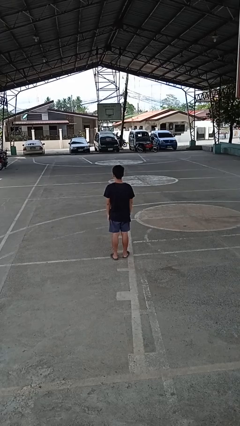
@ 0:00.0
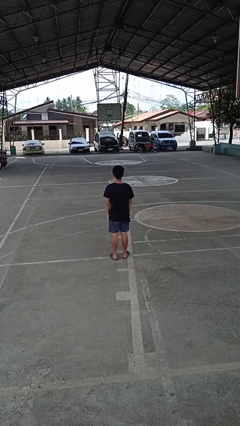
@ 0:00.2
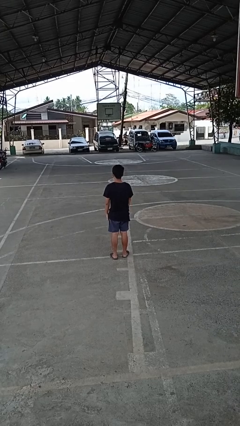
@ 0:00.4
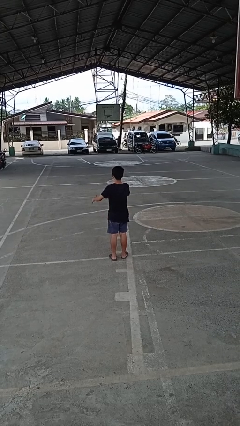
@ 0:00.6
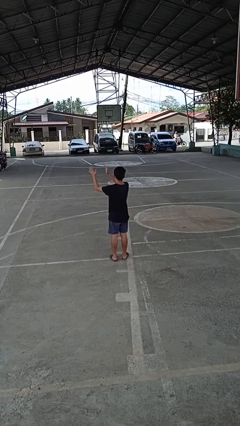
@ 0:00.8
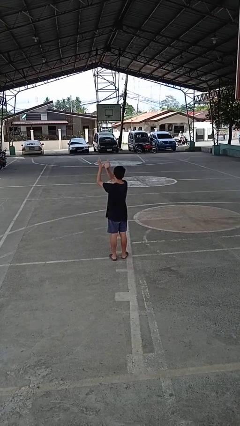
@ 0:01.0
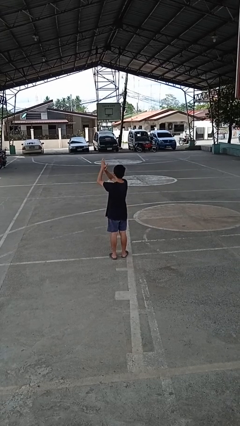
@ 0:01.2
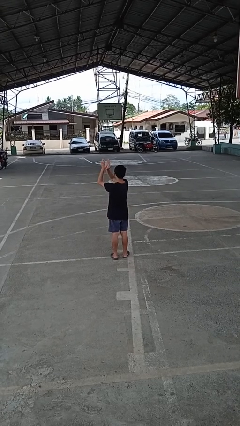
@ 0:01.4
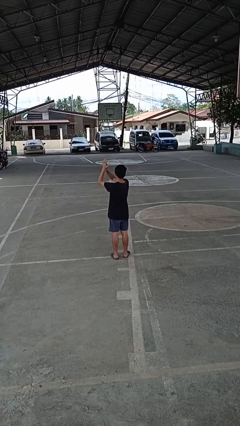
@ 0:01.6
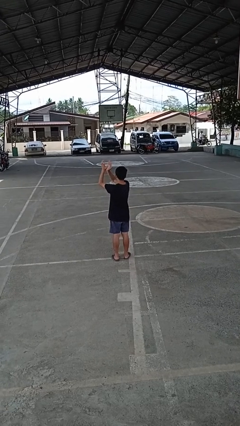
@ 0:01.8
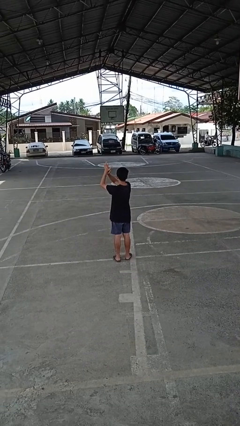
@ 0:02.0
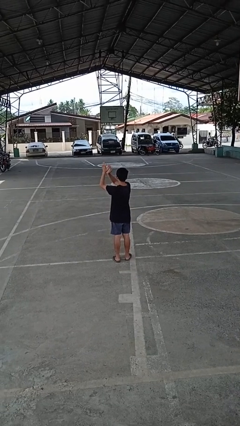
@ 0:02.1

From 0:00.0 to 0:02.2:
person claps hands

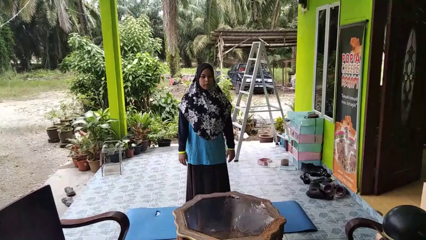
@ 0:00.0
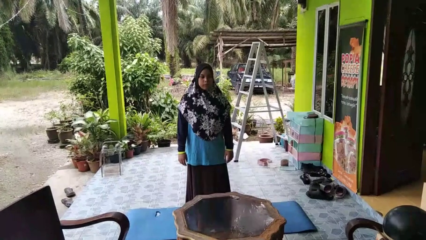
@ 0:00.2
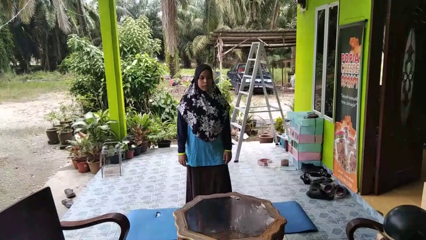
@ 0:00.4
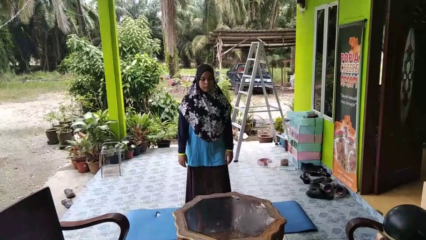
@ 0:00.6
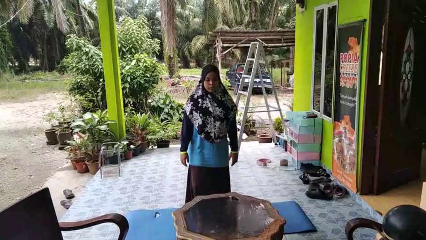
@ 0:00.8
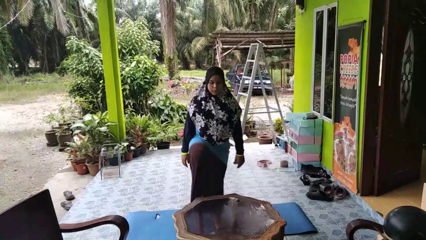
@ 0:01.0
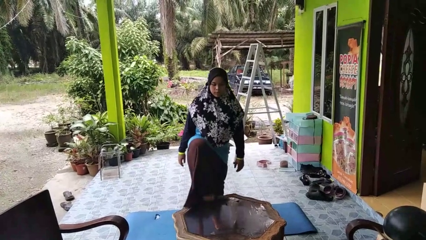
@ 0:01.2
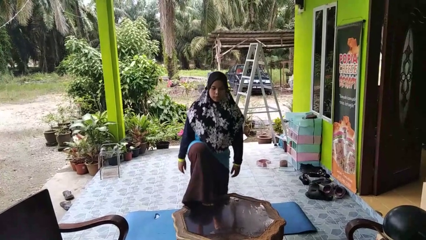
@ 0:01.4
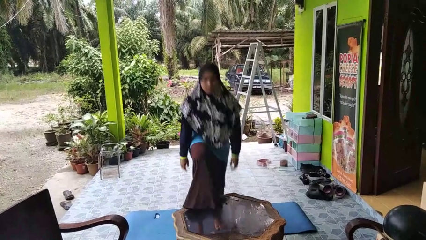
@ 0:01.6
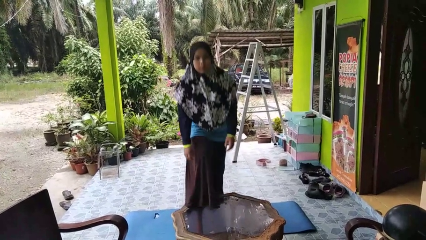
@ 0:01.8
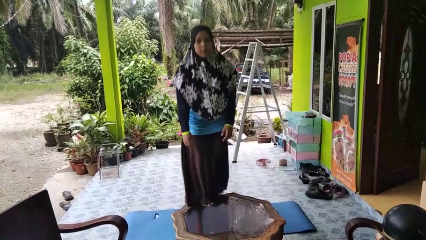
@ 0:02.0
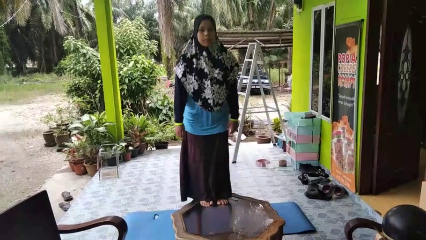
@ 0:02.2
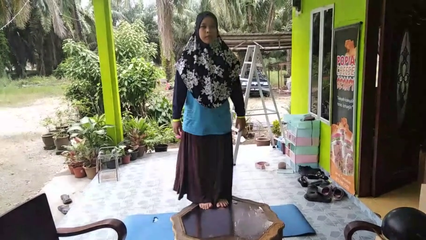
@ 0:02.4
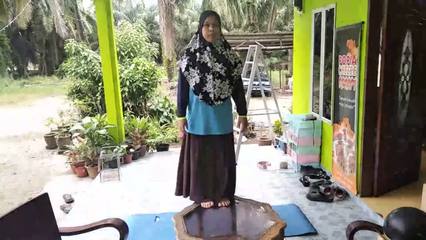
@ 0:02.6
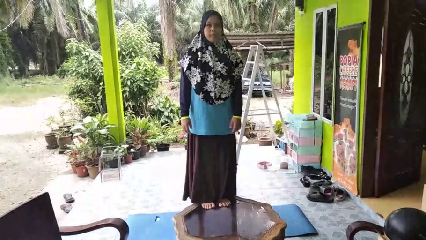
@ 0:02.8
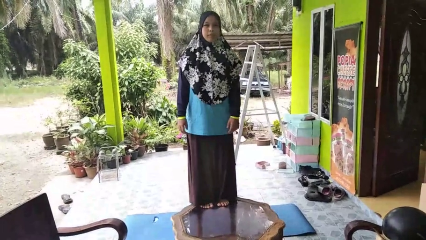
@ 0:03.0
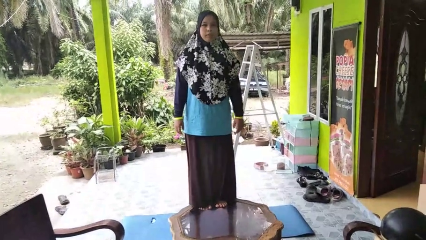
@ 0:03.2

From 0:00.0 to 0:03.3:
person climbs on table

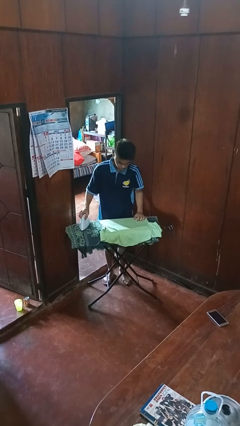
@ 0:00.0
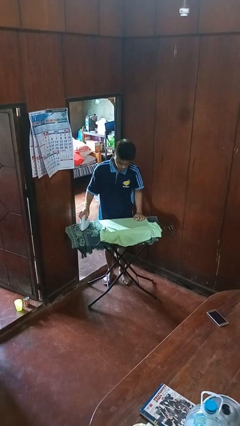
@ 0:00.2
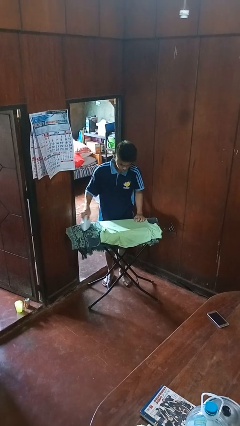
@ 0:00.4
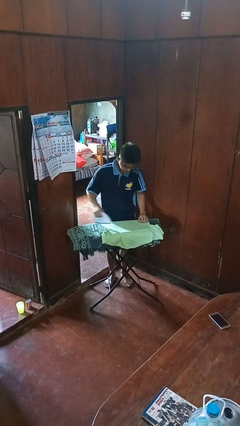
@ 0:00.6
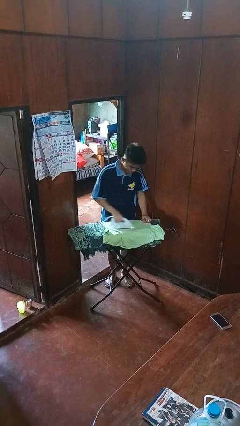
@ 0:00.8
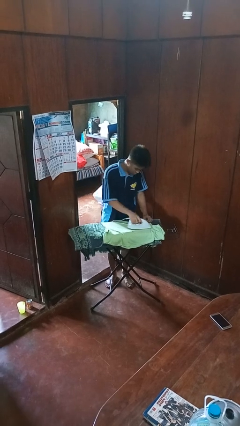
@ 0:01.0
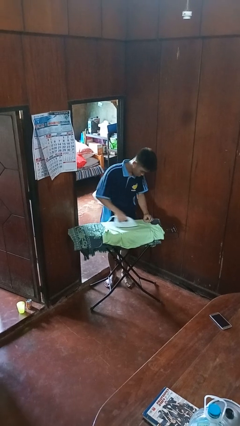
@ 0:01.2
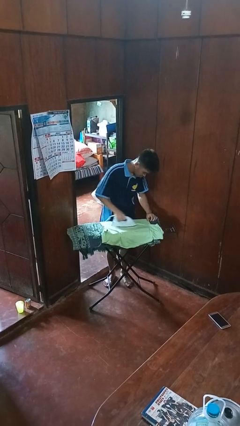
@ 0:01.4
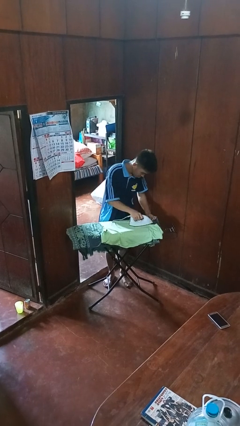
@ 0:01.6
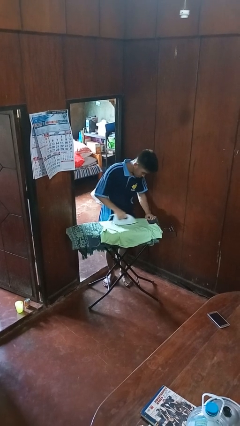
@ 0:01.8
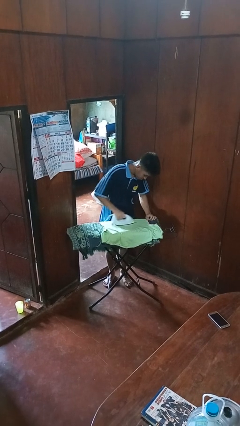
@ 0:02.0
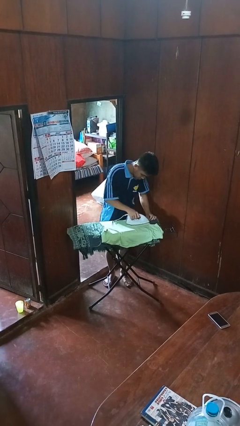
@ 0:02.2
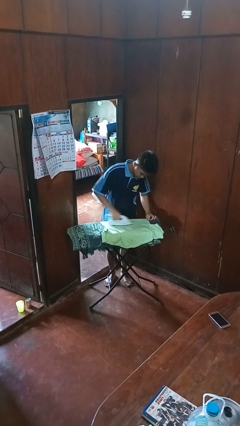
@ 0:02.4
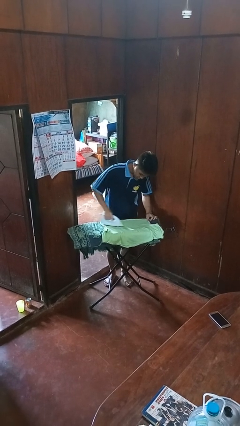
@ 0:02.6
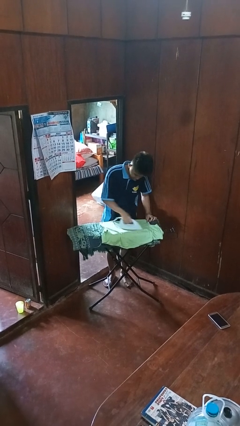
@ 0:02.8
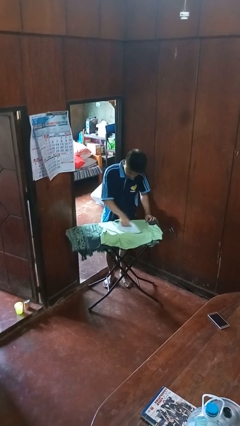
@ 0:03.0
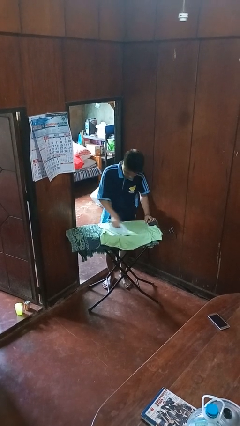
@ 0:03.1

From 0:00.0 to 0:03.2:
person irons clothes

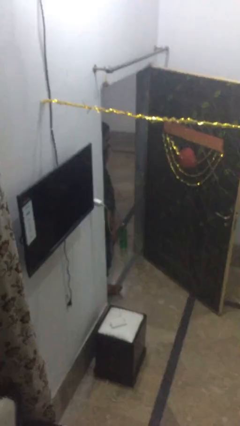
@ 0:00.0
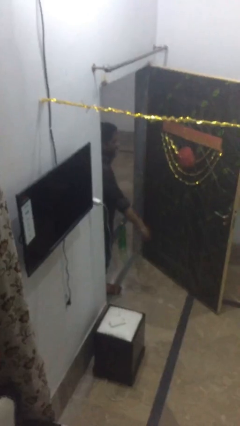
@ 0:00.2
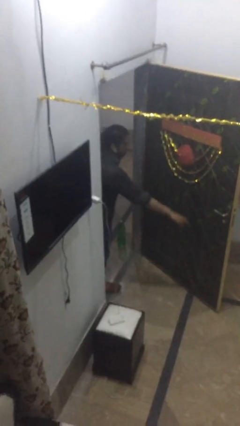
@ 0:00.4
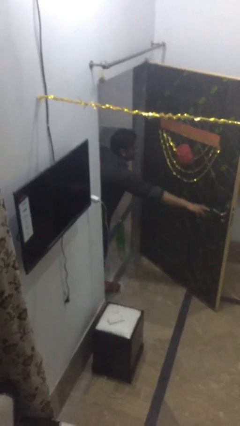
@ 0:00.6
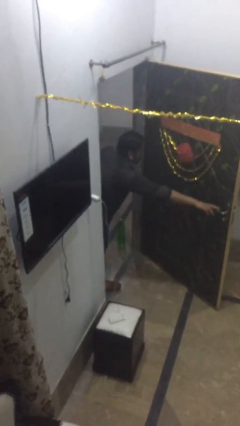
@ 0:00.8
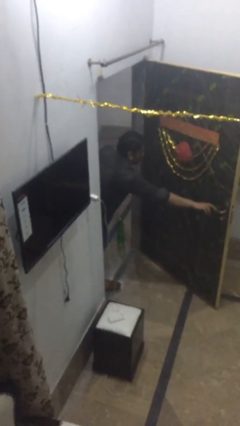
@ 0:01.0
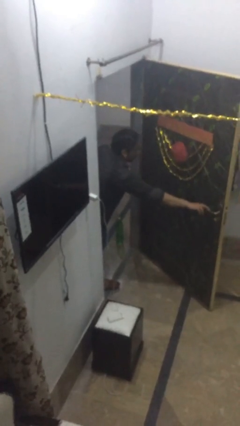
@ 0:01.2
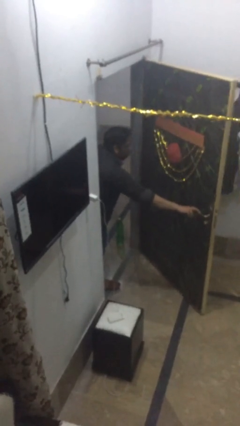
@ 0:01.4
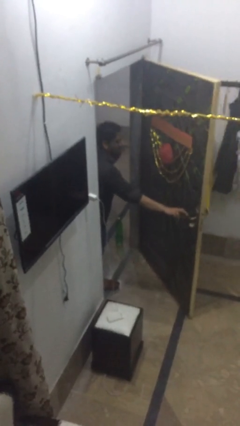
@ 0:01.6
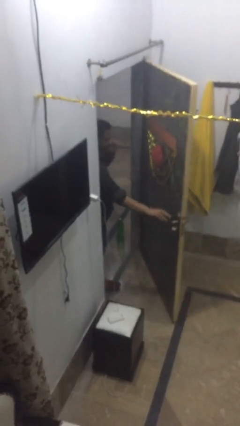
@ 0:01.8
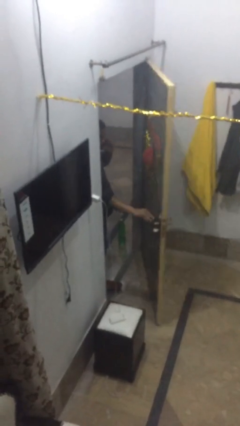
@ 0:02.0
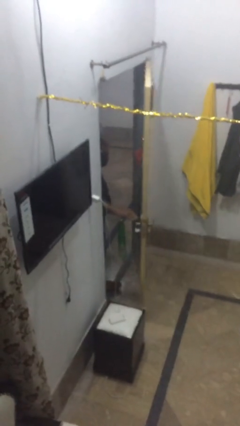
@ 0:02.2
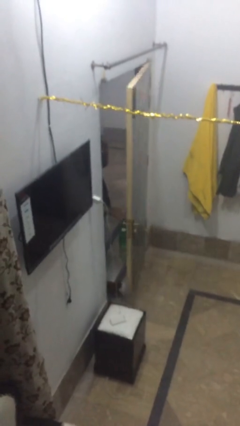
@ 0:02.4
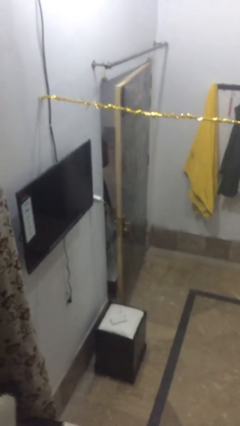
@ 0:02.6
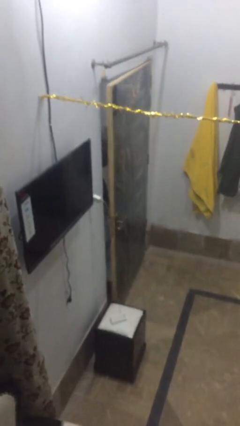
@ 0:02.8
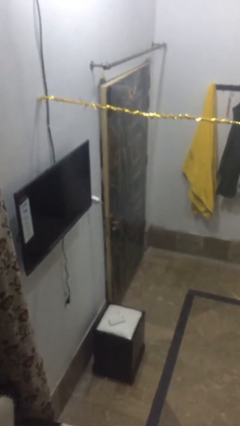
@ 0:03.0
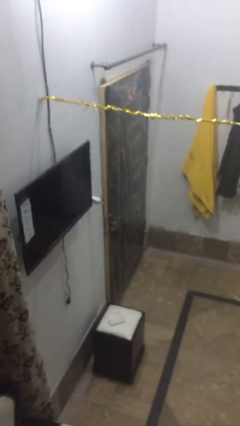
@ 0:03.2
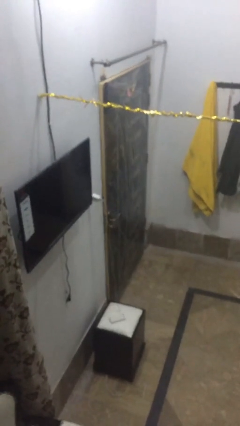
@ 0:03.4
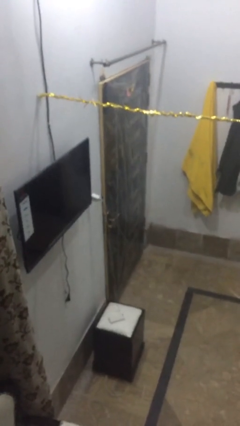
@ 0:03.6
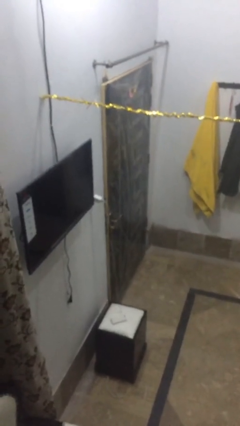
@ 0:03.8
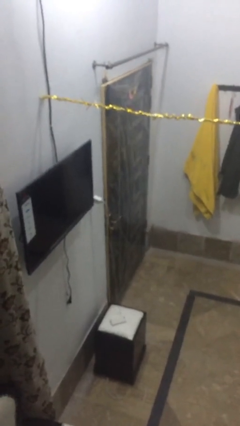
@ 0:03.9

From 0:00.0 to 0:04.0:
person closes facility door

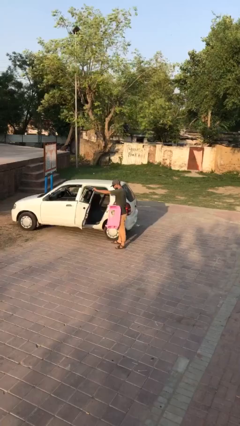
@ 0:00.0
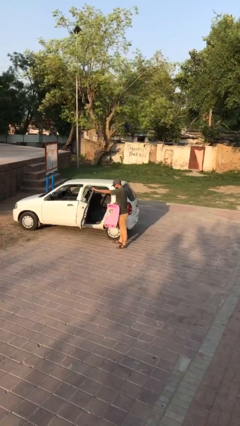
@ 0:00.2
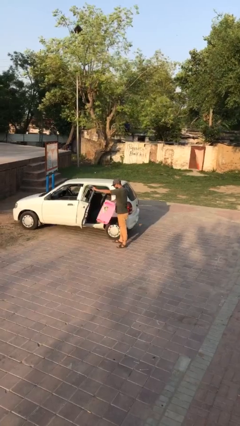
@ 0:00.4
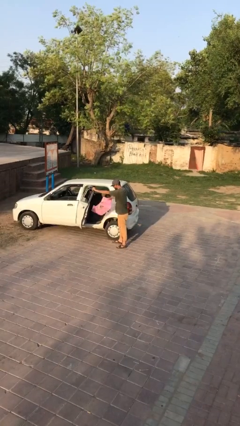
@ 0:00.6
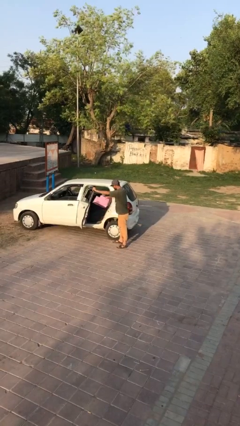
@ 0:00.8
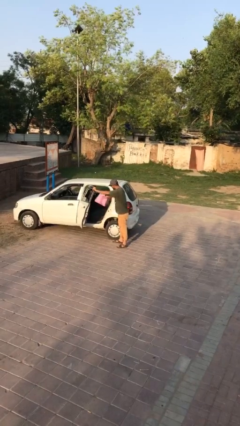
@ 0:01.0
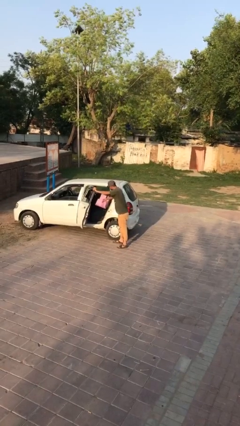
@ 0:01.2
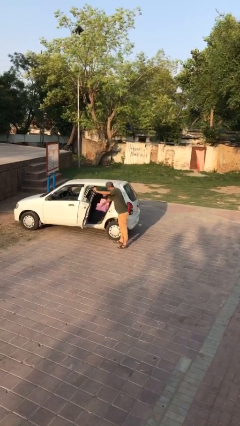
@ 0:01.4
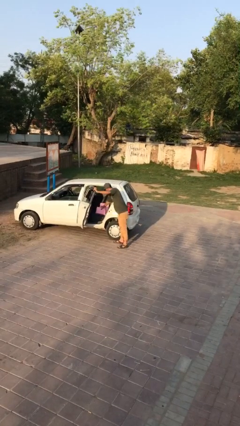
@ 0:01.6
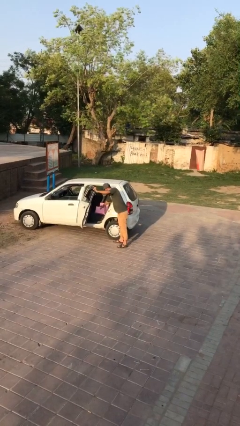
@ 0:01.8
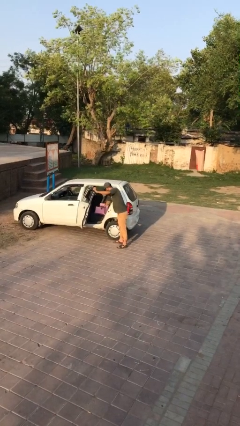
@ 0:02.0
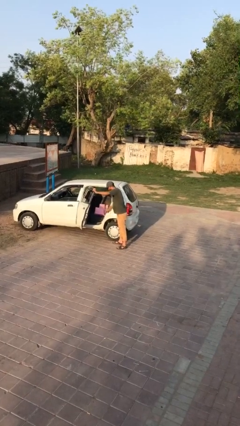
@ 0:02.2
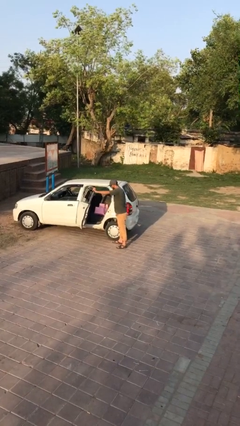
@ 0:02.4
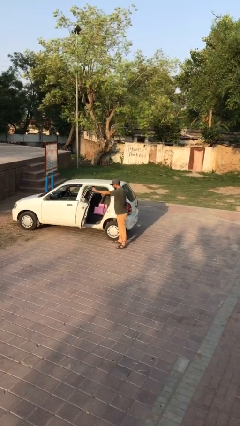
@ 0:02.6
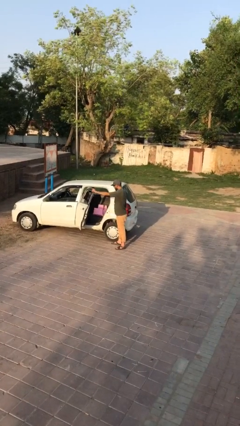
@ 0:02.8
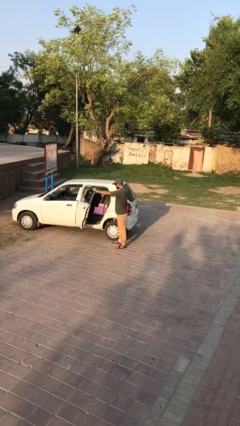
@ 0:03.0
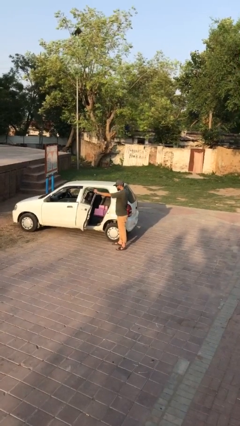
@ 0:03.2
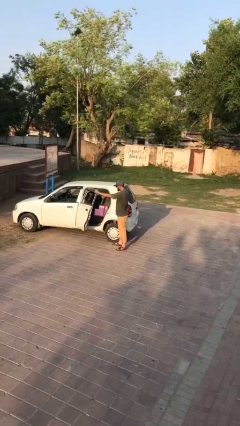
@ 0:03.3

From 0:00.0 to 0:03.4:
person loads car

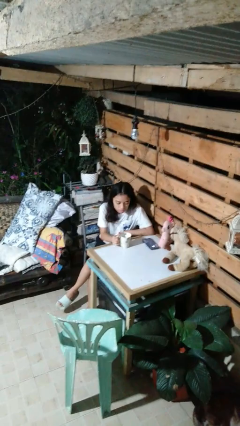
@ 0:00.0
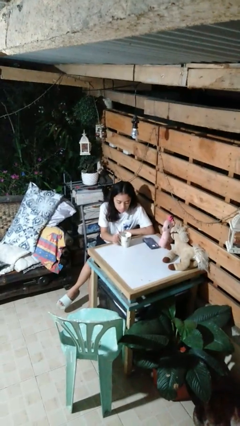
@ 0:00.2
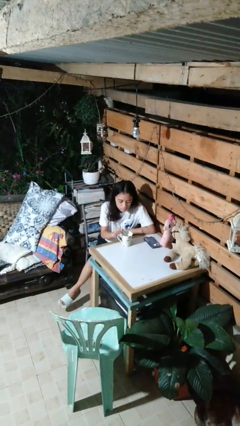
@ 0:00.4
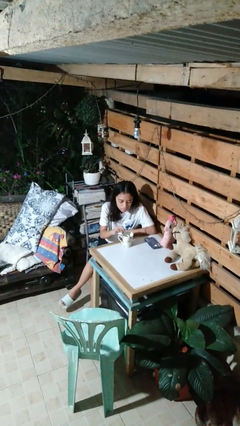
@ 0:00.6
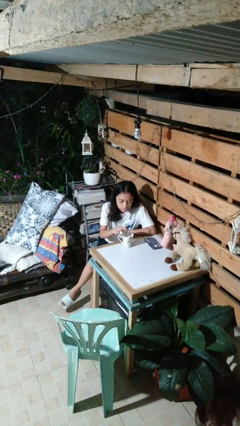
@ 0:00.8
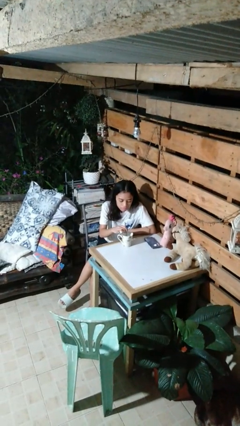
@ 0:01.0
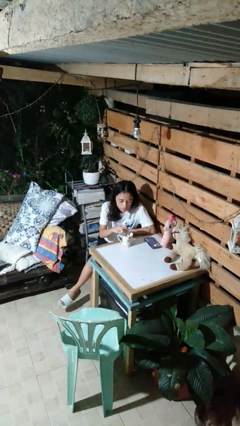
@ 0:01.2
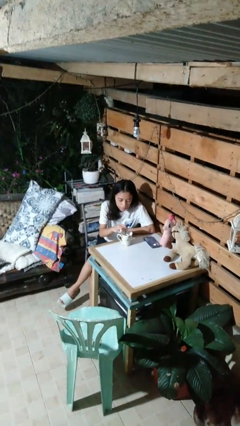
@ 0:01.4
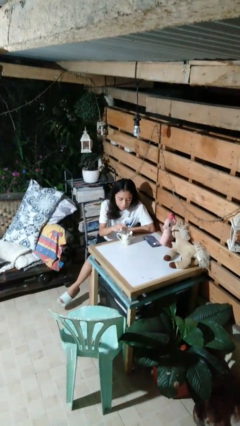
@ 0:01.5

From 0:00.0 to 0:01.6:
person stirs mug
